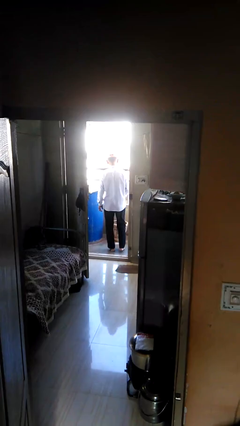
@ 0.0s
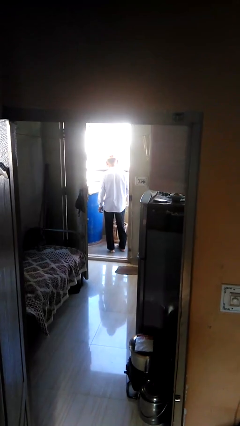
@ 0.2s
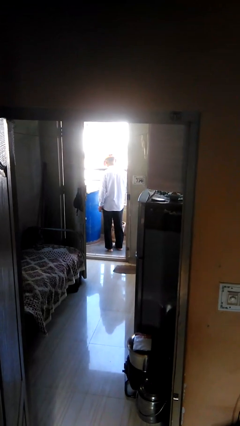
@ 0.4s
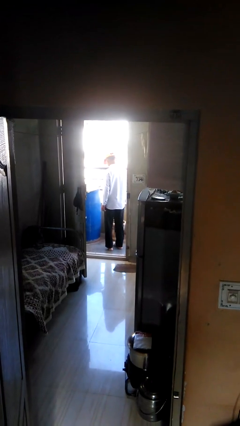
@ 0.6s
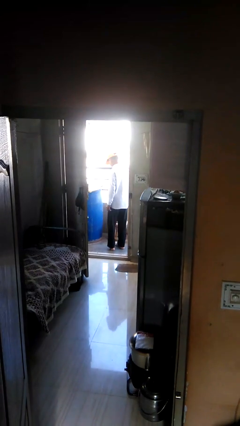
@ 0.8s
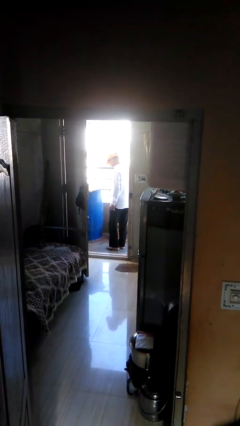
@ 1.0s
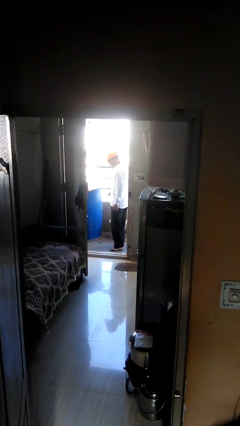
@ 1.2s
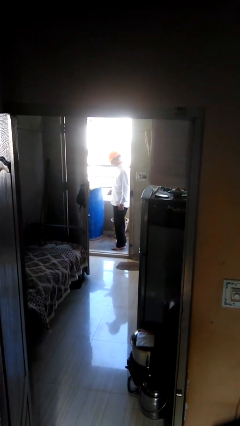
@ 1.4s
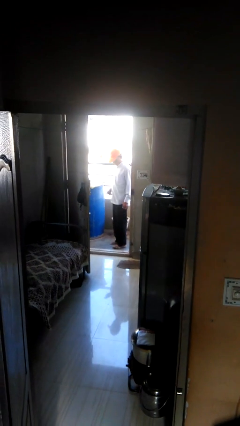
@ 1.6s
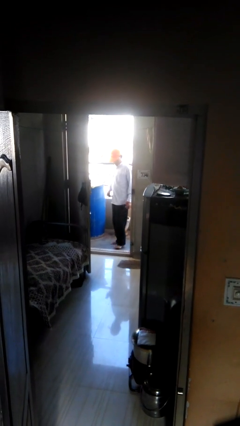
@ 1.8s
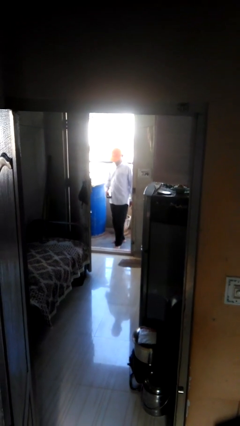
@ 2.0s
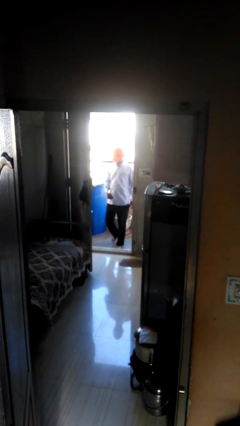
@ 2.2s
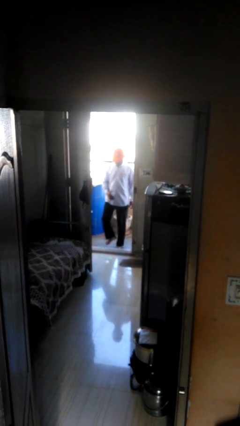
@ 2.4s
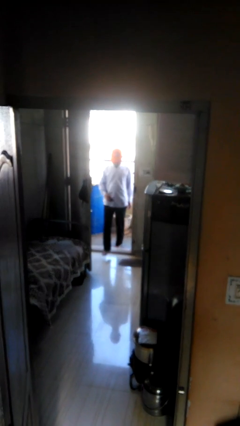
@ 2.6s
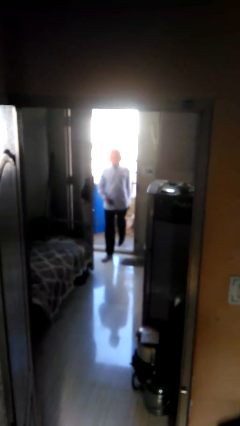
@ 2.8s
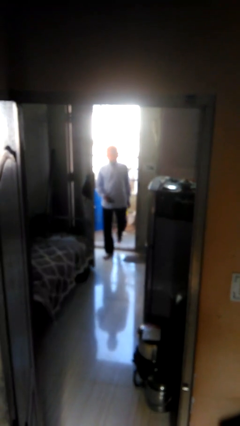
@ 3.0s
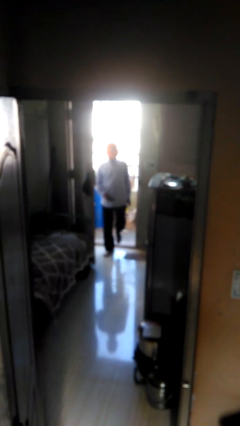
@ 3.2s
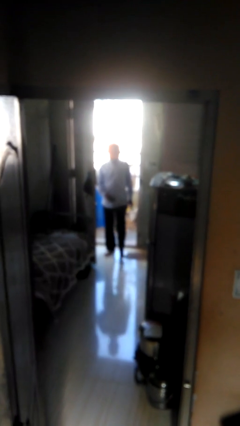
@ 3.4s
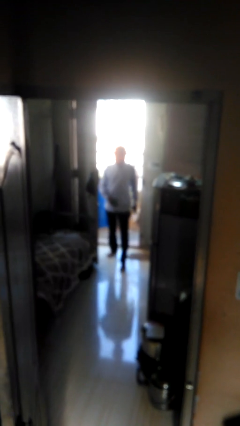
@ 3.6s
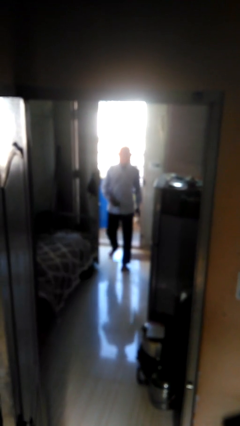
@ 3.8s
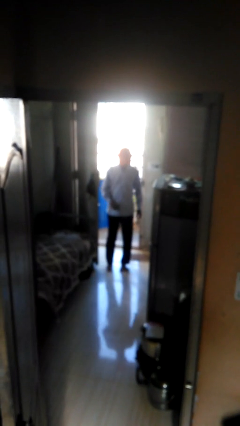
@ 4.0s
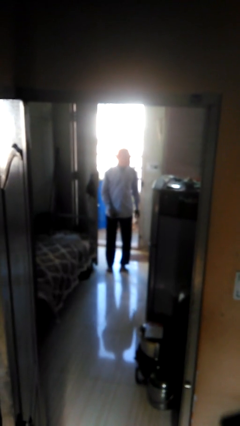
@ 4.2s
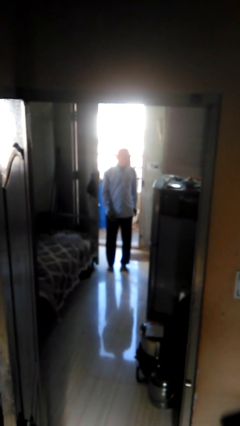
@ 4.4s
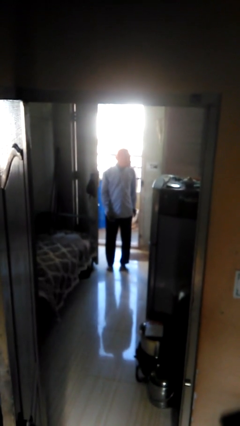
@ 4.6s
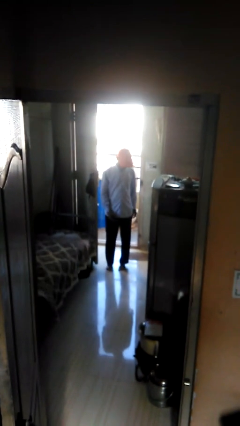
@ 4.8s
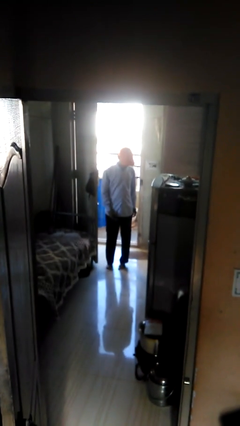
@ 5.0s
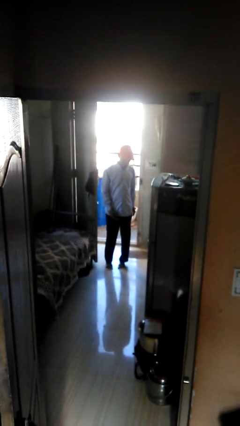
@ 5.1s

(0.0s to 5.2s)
person enters scene through structure

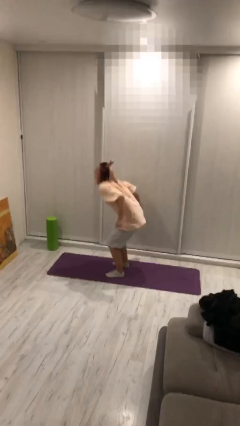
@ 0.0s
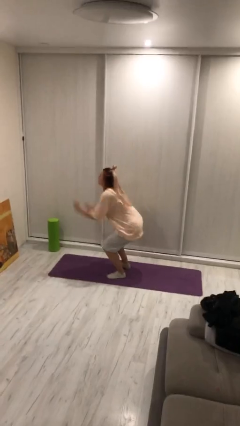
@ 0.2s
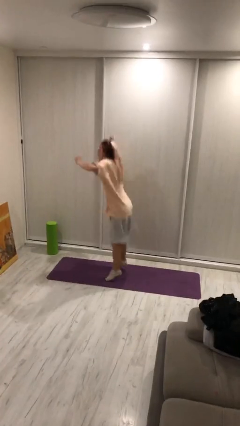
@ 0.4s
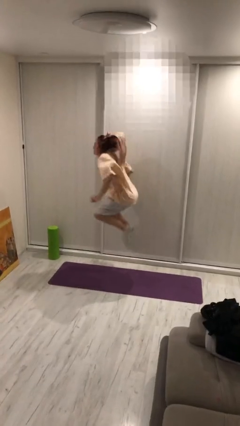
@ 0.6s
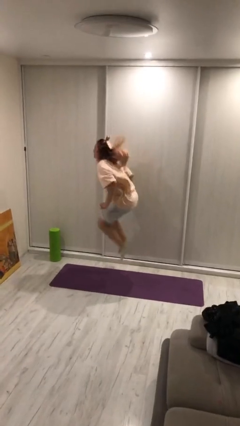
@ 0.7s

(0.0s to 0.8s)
person jumps

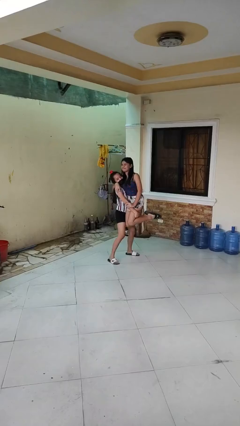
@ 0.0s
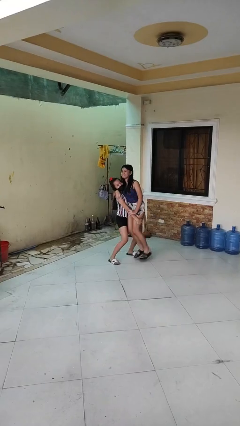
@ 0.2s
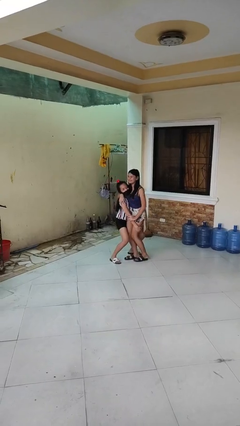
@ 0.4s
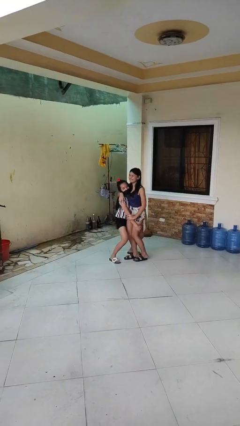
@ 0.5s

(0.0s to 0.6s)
person puts down person

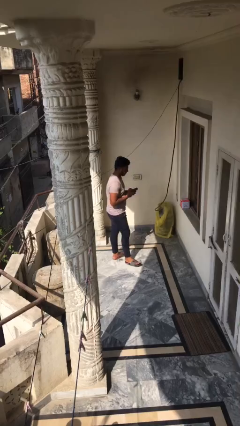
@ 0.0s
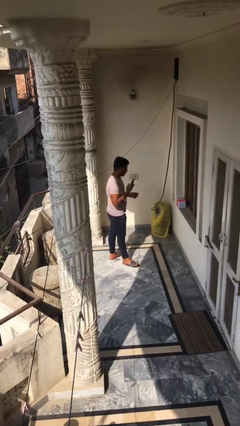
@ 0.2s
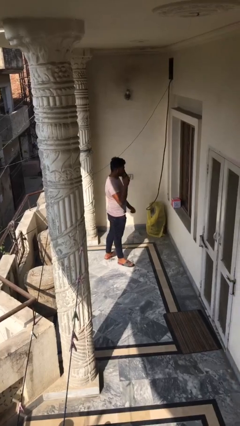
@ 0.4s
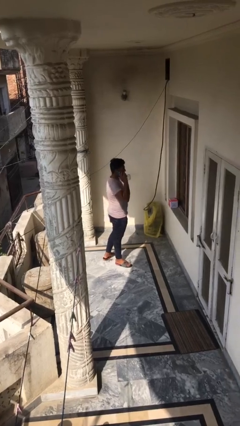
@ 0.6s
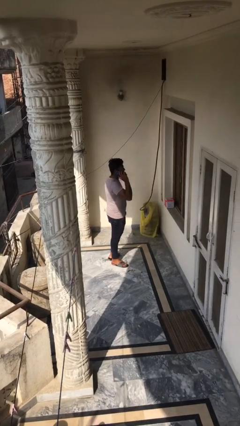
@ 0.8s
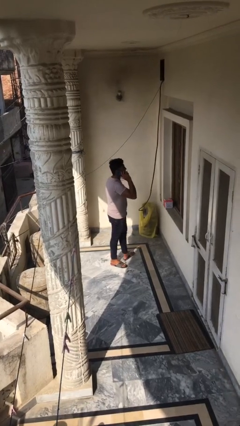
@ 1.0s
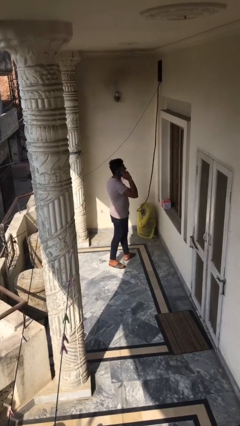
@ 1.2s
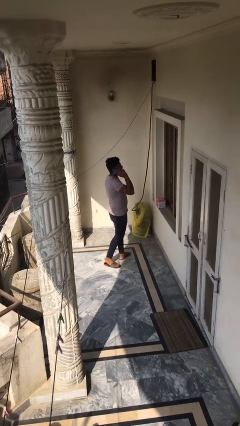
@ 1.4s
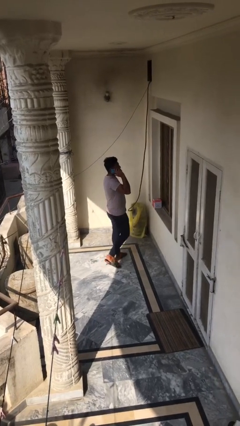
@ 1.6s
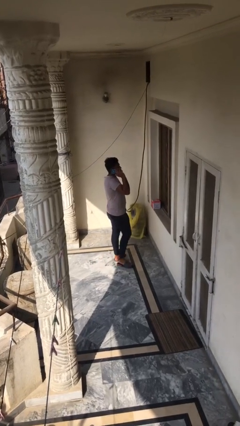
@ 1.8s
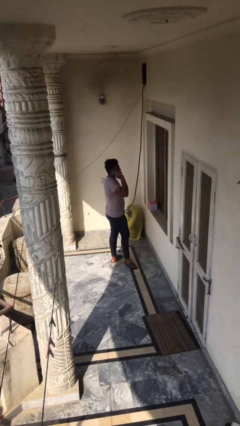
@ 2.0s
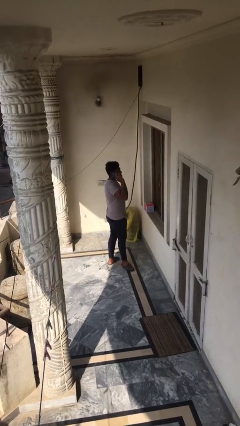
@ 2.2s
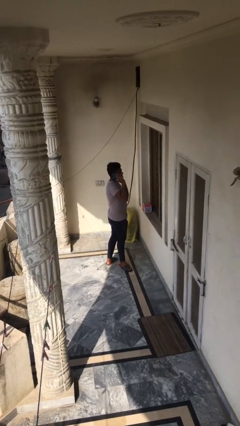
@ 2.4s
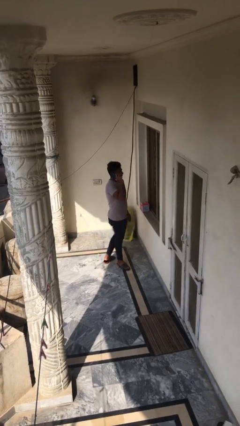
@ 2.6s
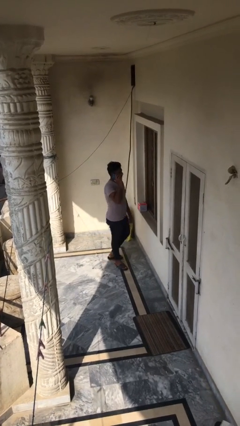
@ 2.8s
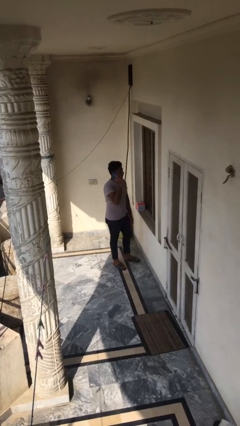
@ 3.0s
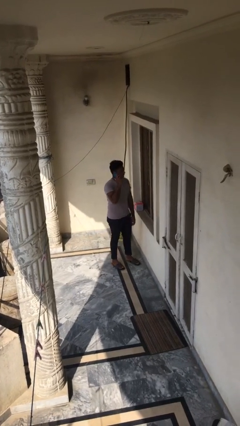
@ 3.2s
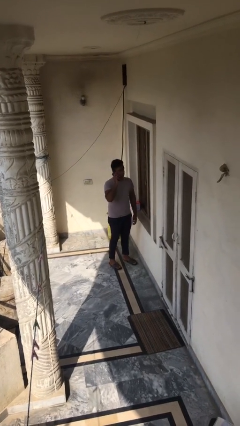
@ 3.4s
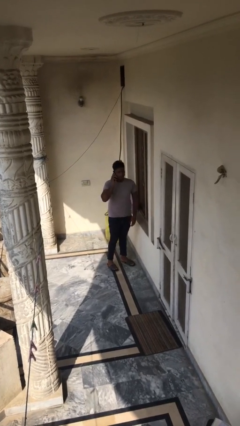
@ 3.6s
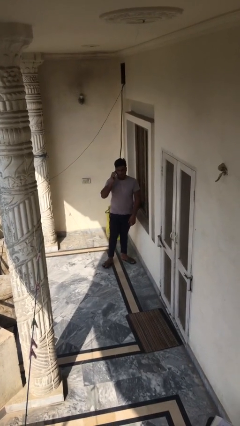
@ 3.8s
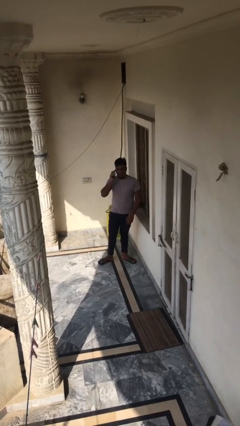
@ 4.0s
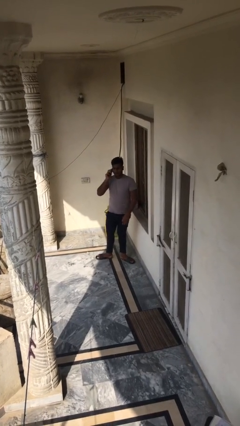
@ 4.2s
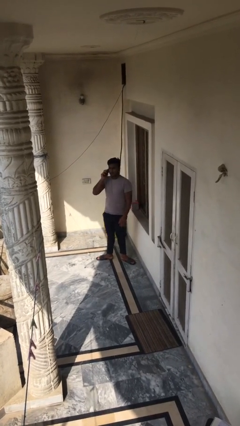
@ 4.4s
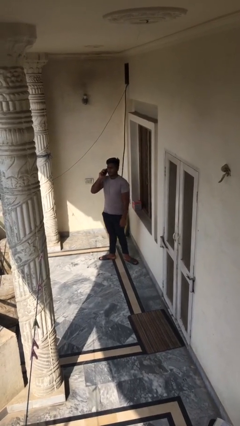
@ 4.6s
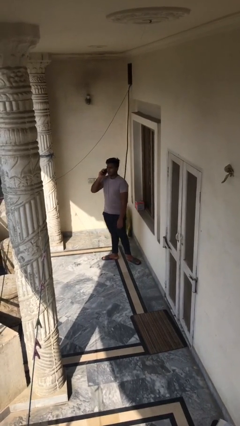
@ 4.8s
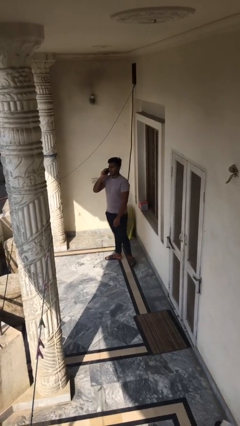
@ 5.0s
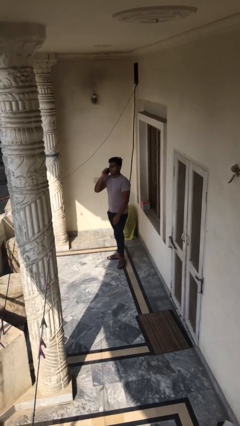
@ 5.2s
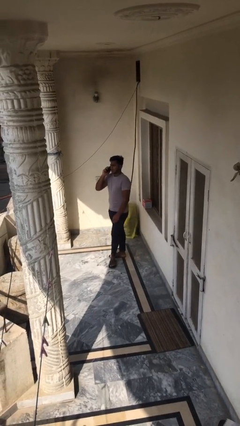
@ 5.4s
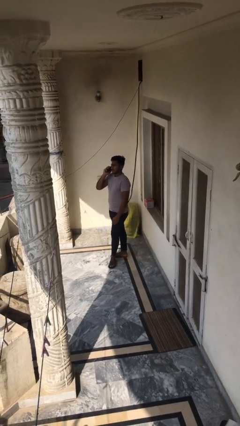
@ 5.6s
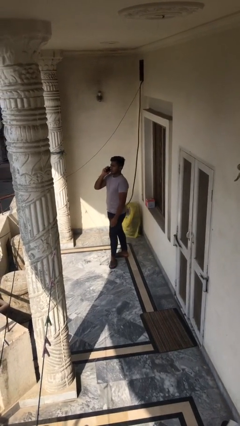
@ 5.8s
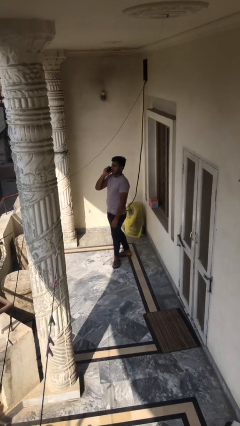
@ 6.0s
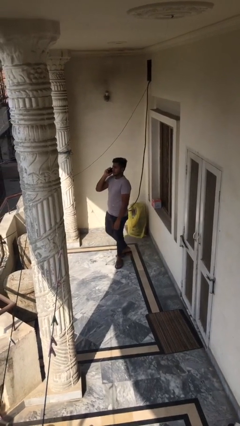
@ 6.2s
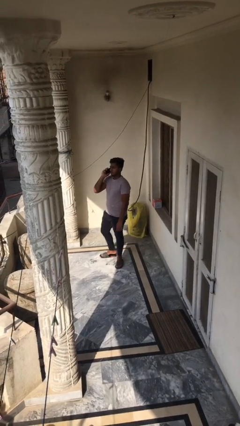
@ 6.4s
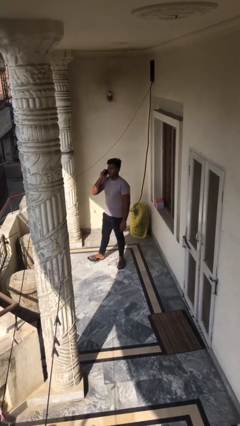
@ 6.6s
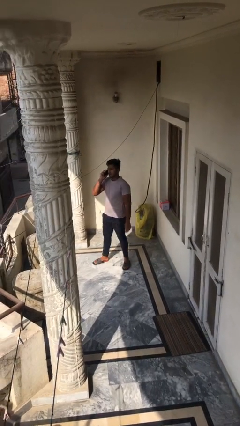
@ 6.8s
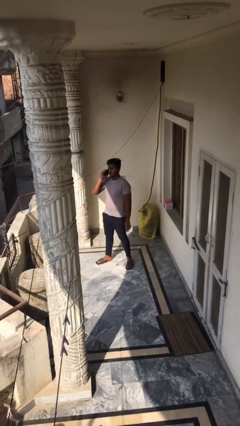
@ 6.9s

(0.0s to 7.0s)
person talks on phone

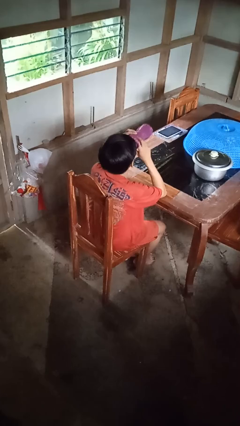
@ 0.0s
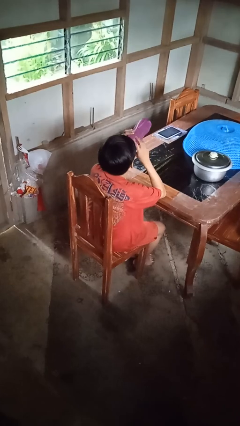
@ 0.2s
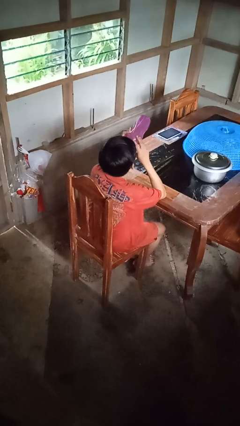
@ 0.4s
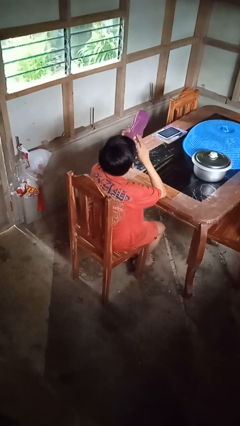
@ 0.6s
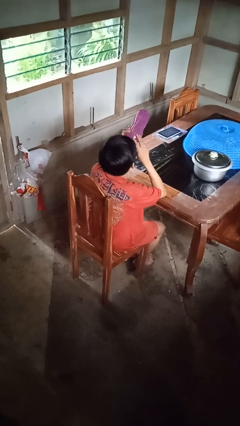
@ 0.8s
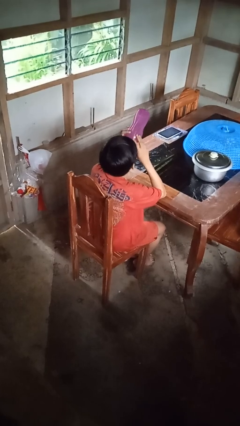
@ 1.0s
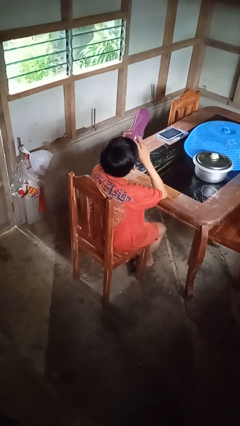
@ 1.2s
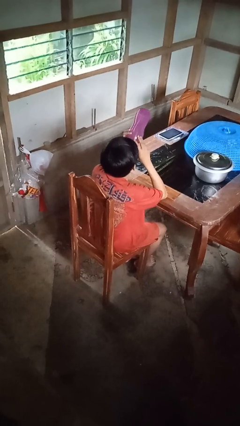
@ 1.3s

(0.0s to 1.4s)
person drinks from bottle

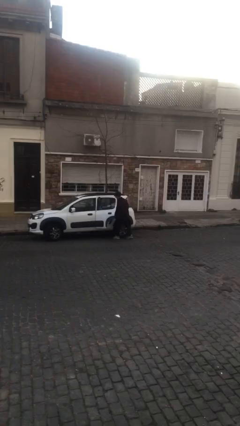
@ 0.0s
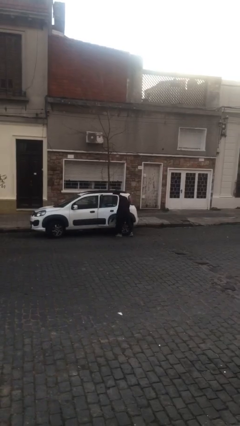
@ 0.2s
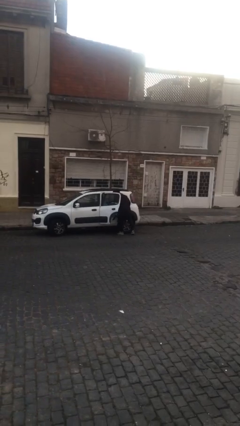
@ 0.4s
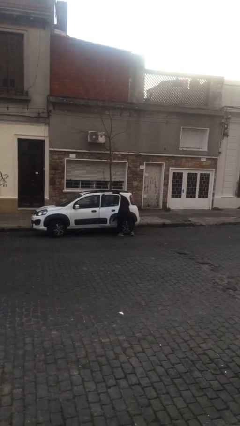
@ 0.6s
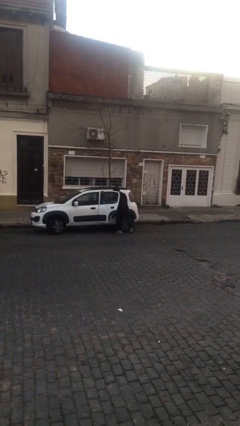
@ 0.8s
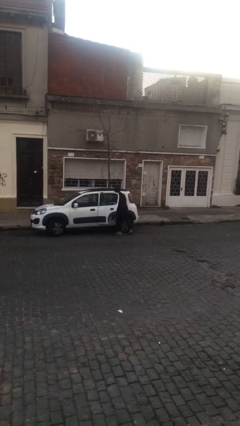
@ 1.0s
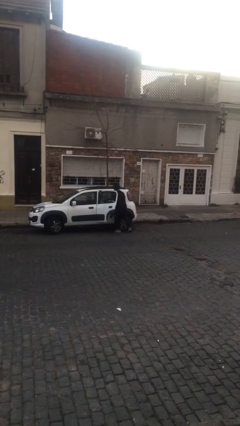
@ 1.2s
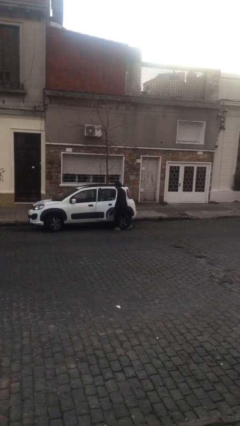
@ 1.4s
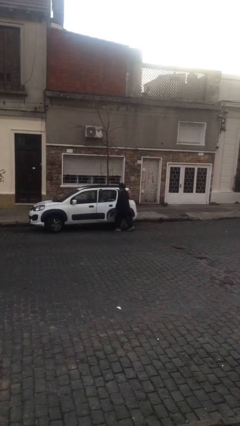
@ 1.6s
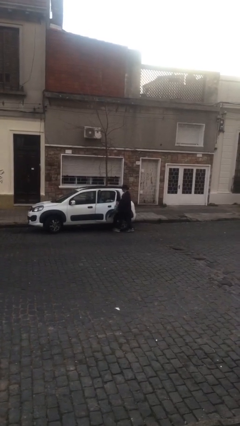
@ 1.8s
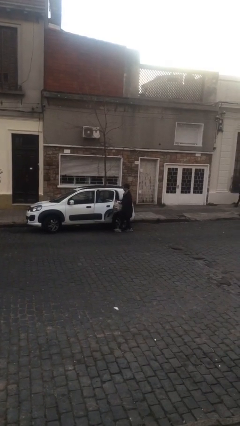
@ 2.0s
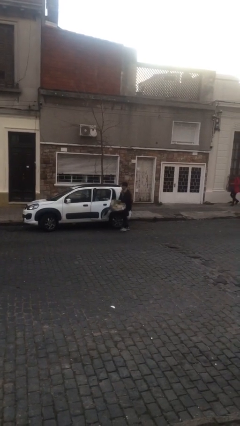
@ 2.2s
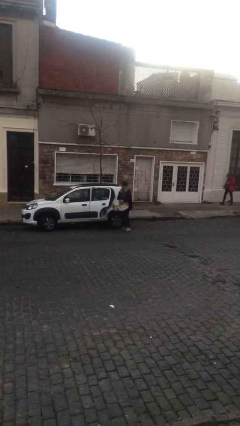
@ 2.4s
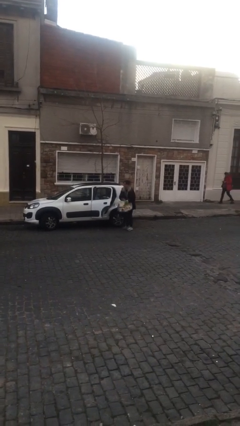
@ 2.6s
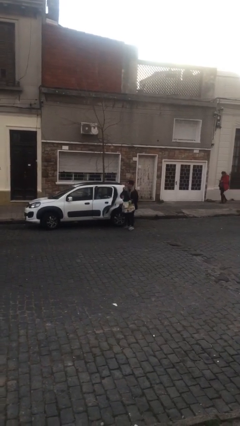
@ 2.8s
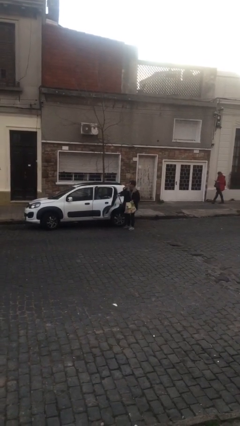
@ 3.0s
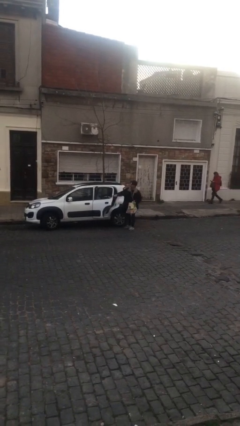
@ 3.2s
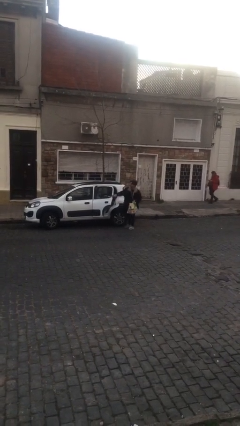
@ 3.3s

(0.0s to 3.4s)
person unloads car
